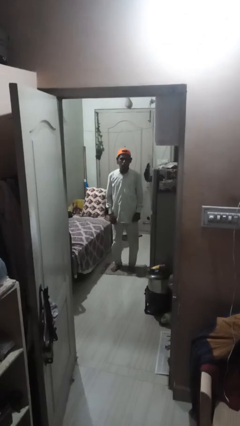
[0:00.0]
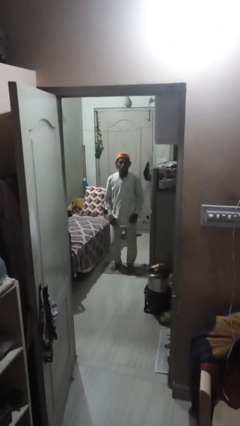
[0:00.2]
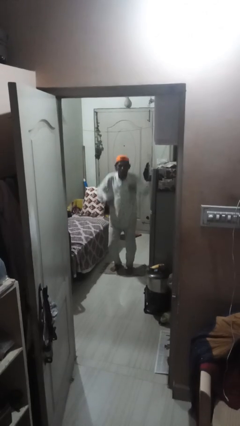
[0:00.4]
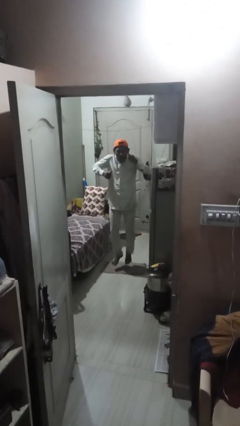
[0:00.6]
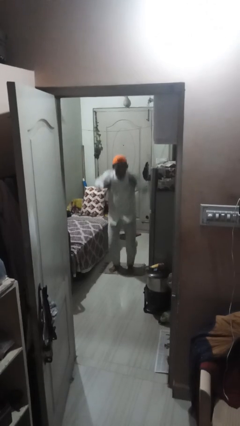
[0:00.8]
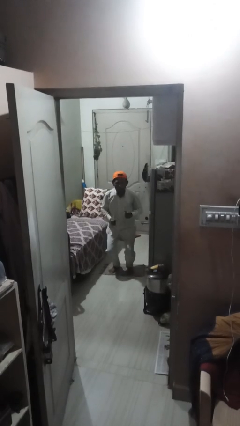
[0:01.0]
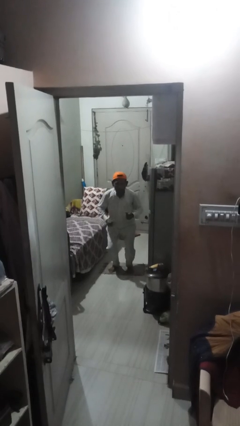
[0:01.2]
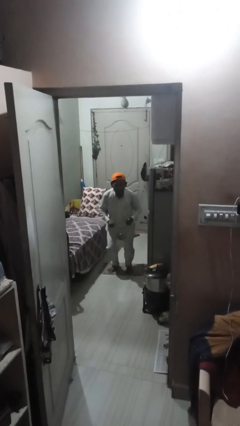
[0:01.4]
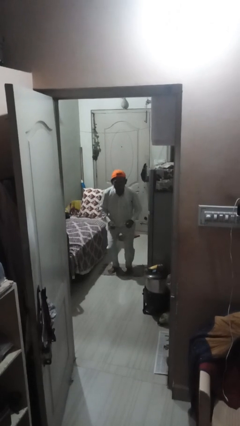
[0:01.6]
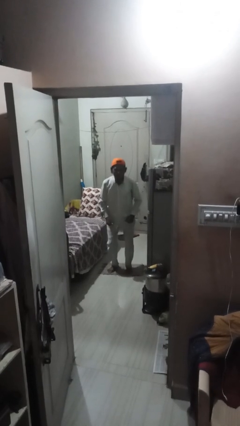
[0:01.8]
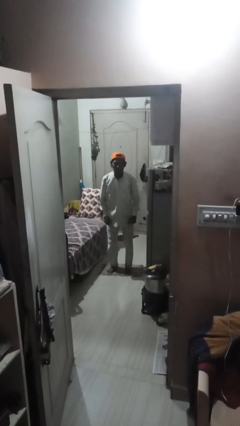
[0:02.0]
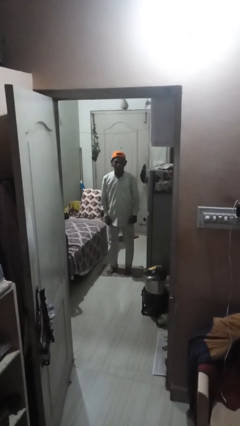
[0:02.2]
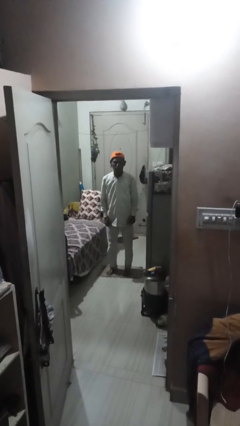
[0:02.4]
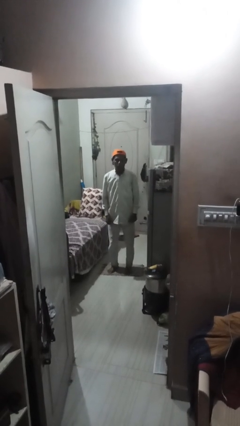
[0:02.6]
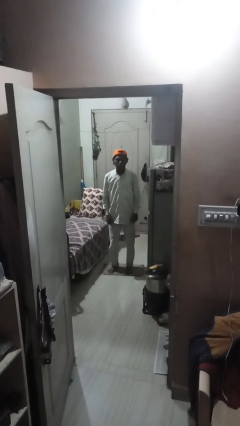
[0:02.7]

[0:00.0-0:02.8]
person jumps

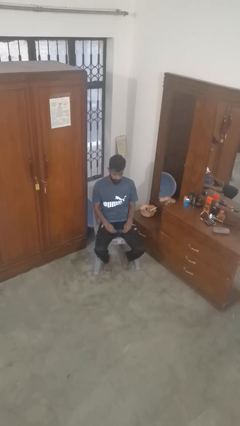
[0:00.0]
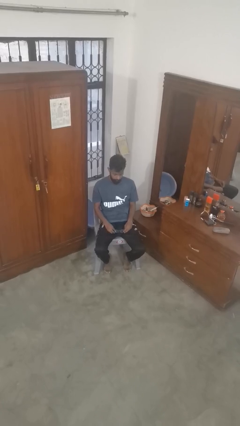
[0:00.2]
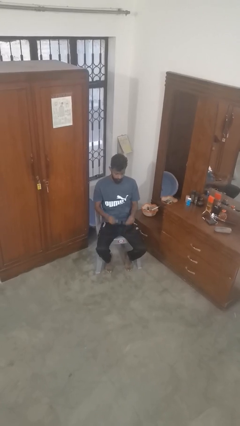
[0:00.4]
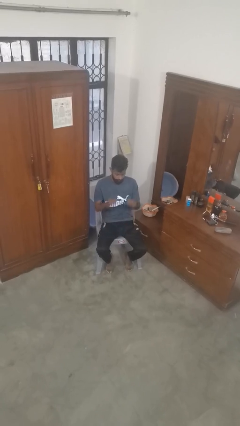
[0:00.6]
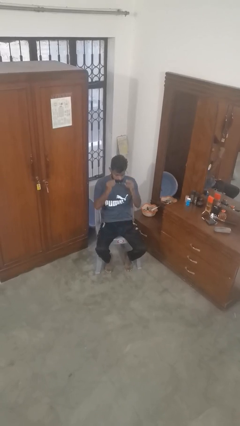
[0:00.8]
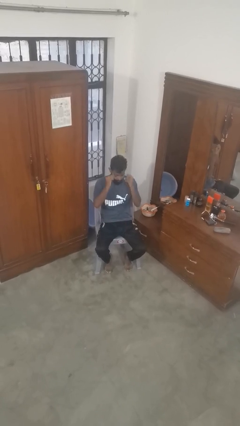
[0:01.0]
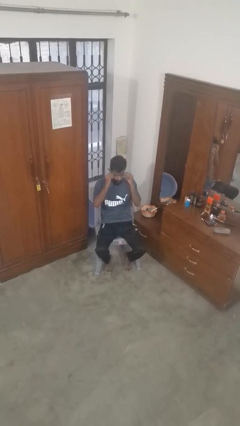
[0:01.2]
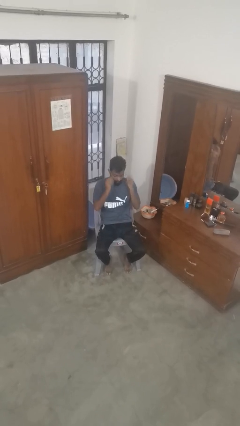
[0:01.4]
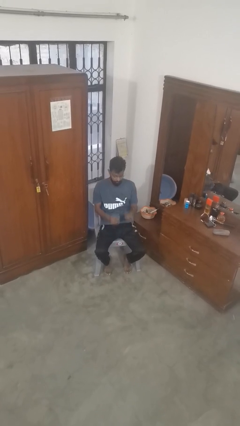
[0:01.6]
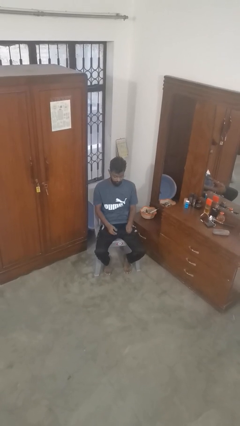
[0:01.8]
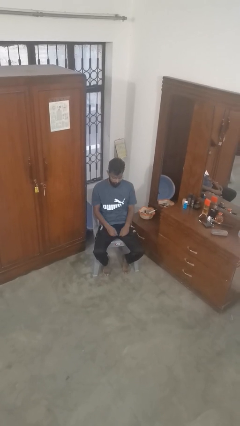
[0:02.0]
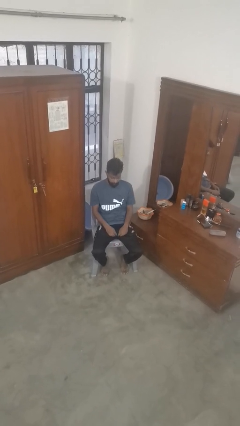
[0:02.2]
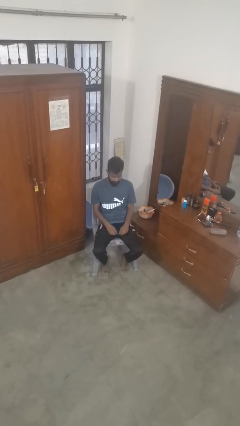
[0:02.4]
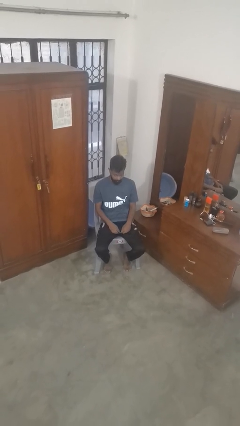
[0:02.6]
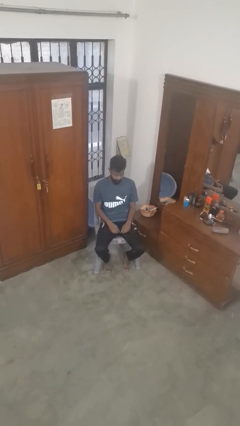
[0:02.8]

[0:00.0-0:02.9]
person puts on glasses

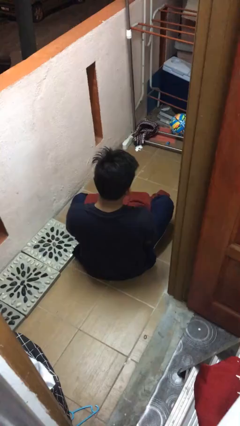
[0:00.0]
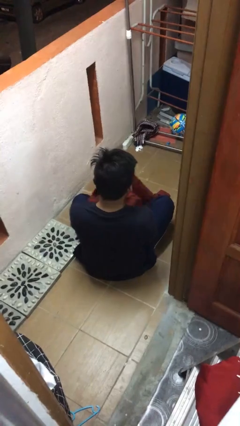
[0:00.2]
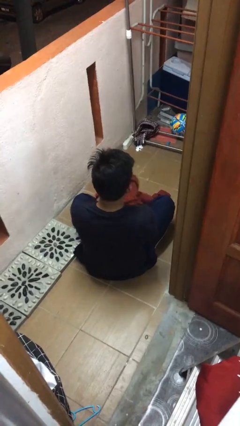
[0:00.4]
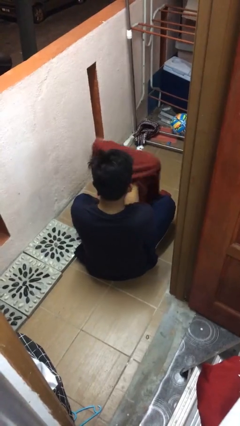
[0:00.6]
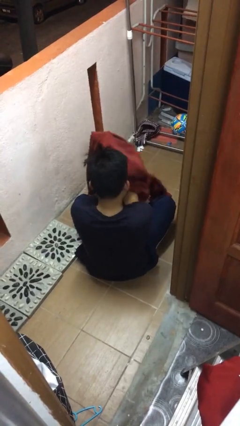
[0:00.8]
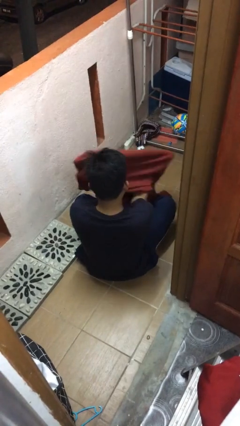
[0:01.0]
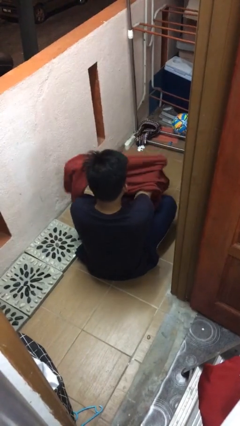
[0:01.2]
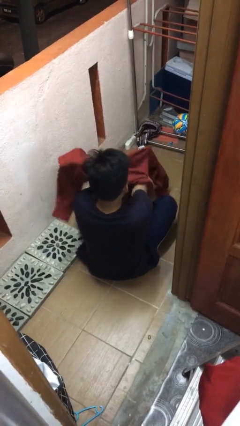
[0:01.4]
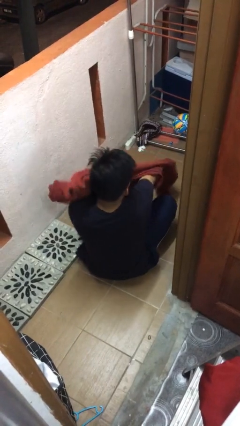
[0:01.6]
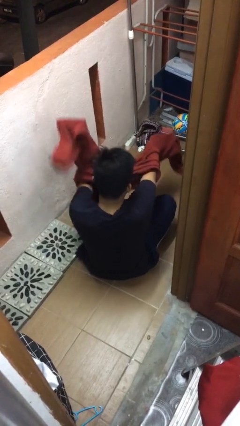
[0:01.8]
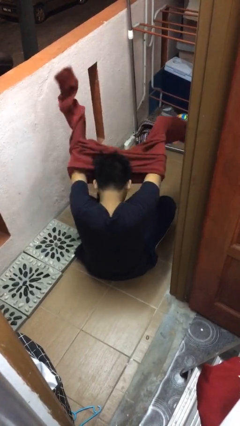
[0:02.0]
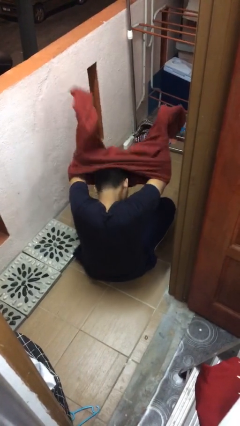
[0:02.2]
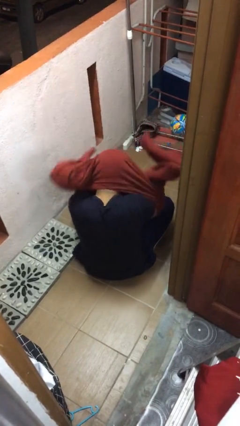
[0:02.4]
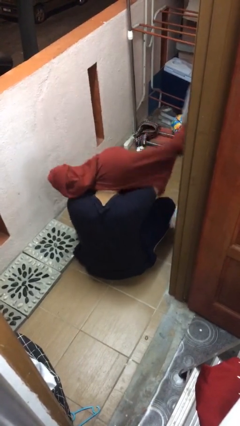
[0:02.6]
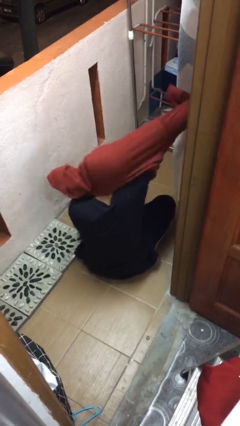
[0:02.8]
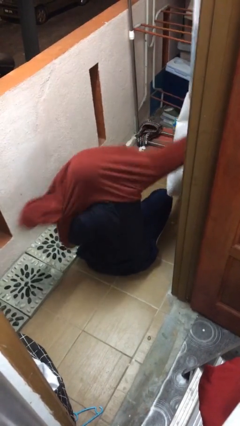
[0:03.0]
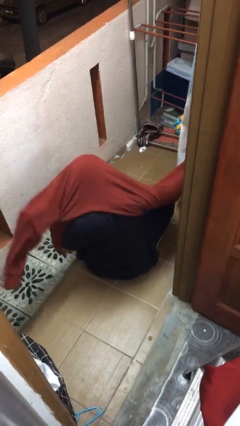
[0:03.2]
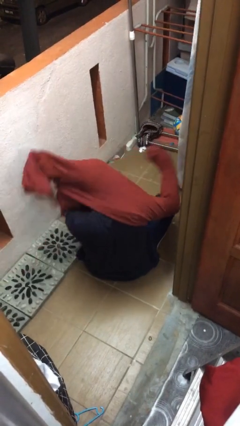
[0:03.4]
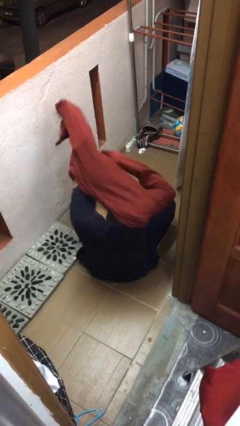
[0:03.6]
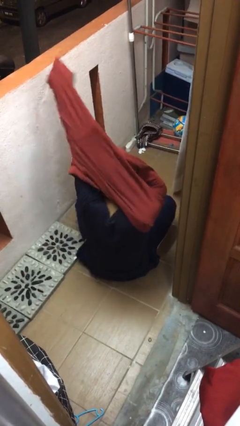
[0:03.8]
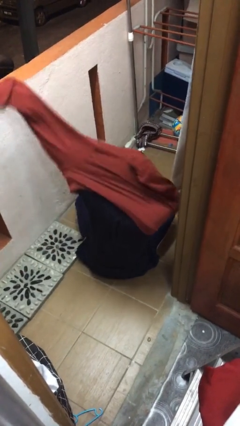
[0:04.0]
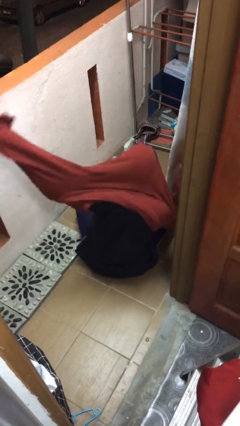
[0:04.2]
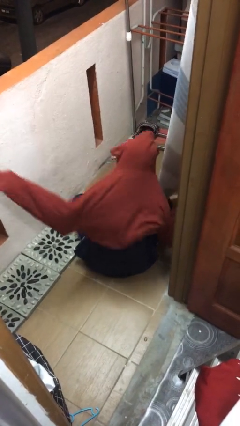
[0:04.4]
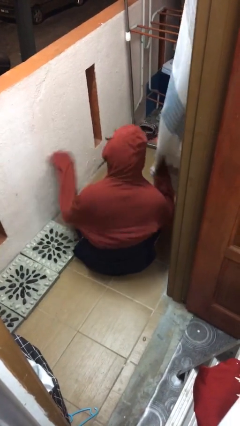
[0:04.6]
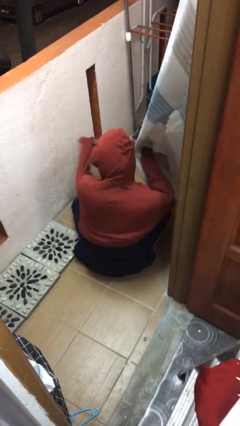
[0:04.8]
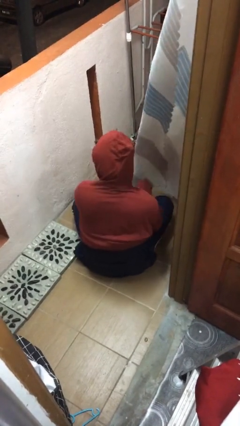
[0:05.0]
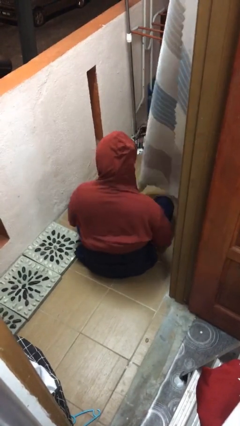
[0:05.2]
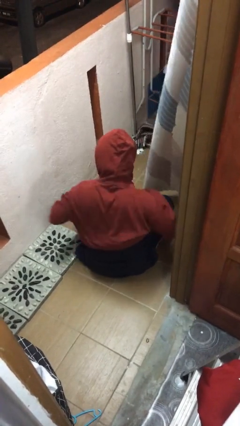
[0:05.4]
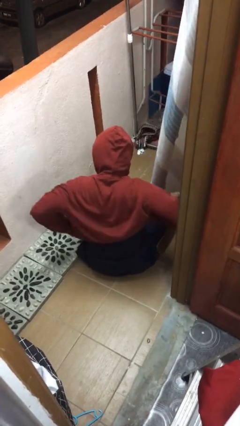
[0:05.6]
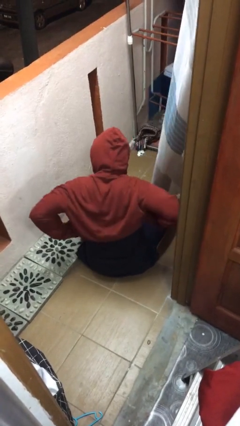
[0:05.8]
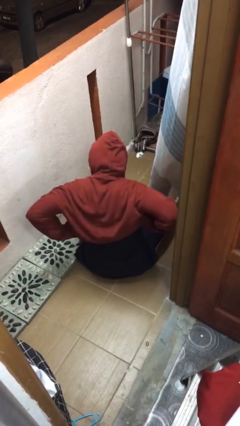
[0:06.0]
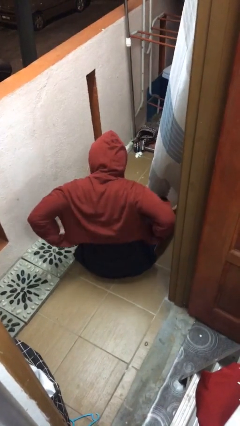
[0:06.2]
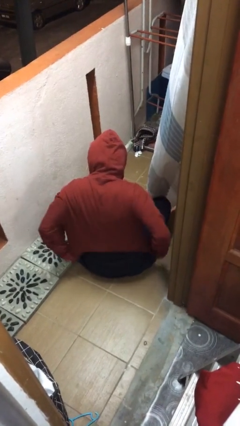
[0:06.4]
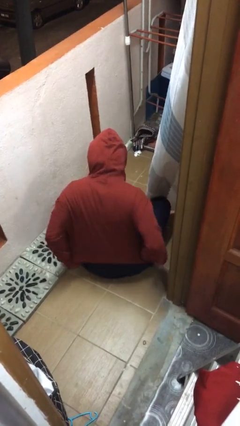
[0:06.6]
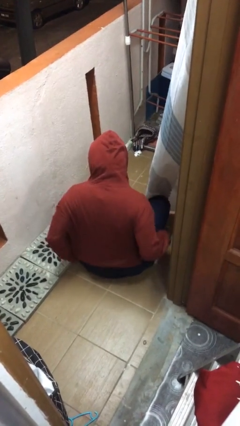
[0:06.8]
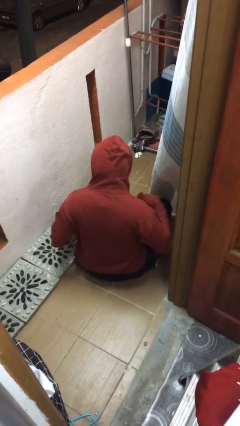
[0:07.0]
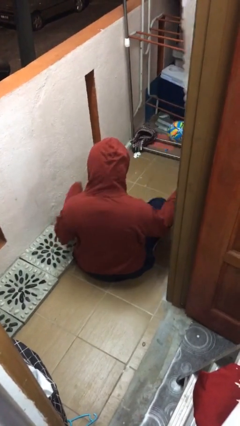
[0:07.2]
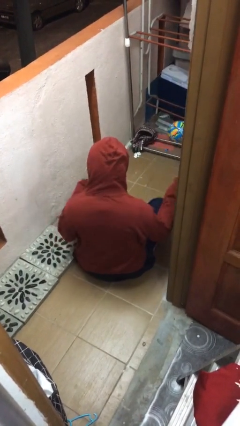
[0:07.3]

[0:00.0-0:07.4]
person puts on hoodie

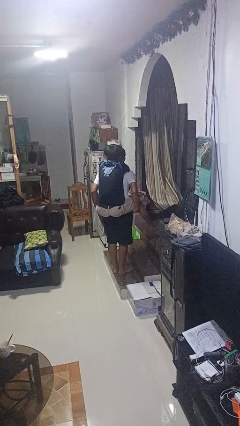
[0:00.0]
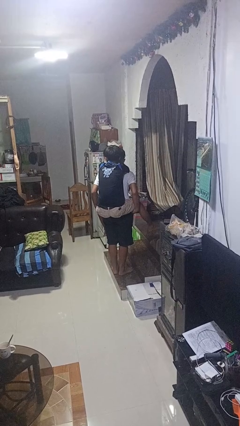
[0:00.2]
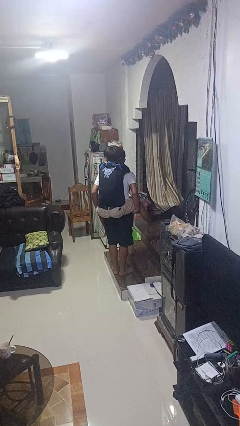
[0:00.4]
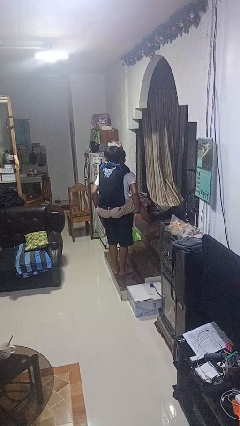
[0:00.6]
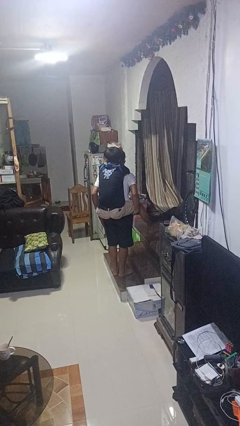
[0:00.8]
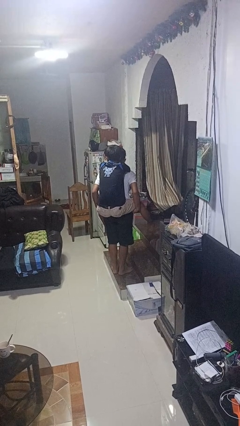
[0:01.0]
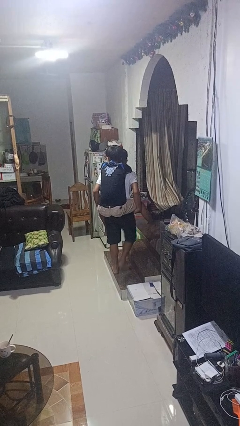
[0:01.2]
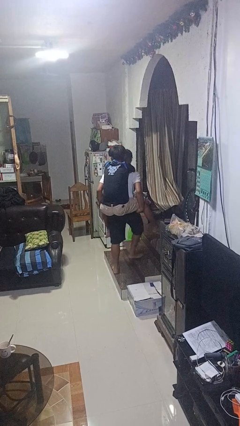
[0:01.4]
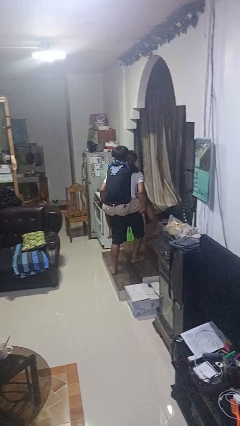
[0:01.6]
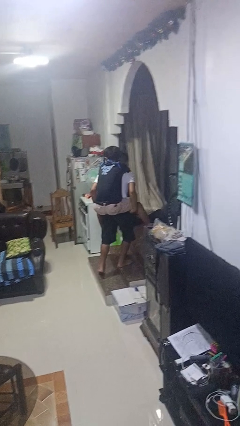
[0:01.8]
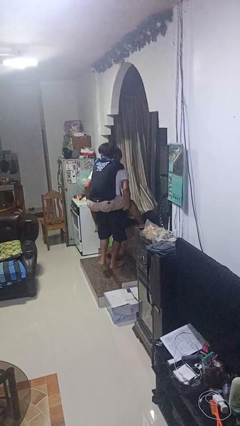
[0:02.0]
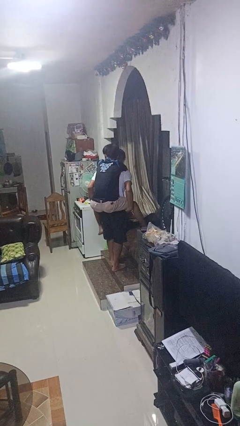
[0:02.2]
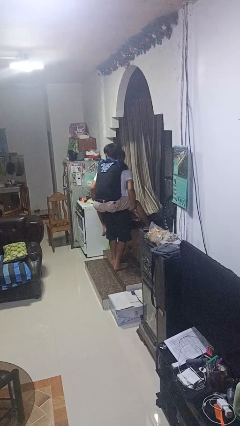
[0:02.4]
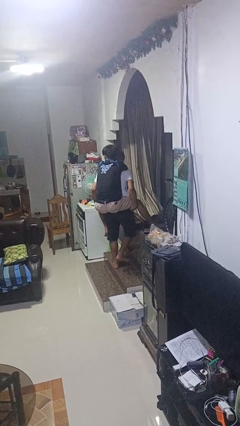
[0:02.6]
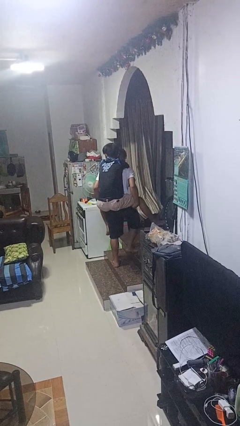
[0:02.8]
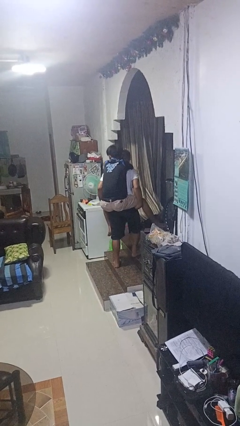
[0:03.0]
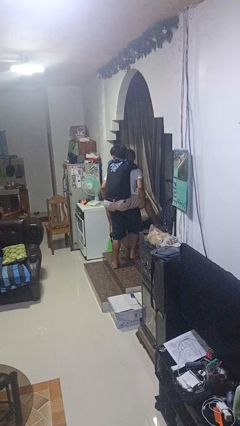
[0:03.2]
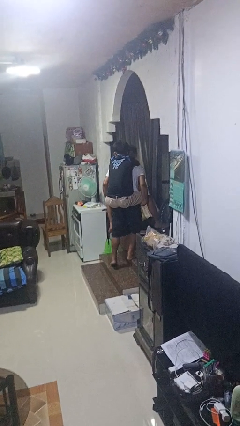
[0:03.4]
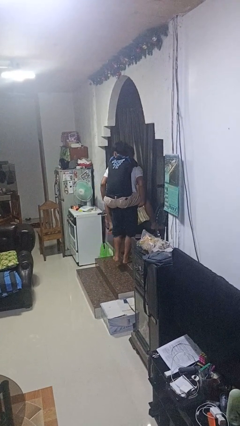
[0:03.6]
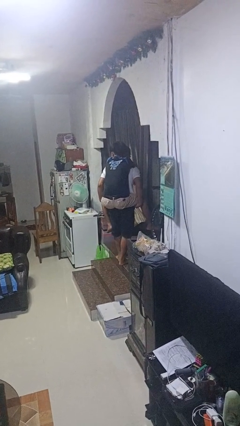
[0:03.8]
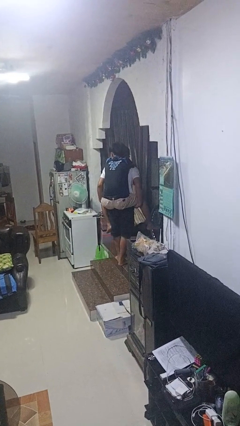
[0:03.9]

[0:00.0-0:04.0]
person carries person on back

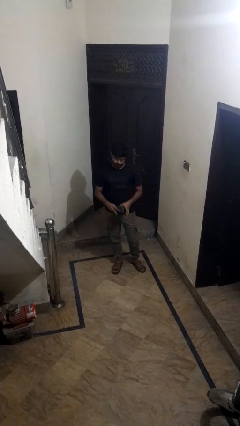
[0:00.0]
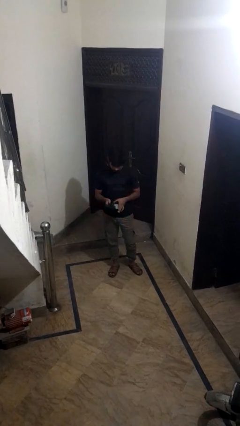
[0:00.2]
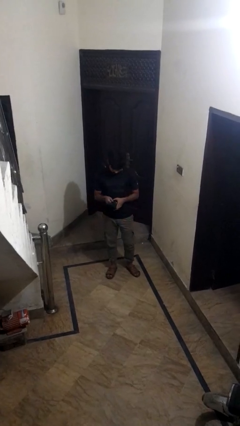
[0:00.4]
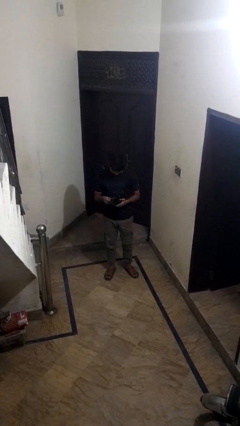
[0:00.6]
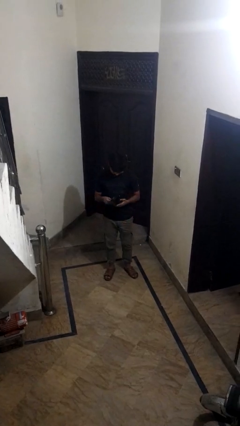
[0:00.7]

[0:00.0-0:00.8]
person puts object into purse
